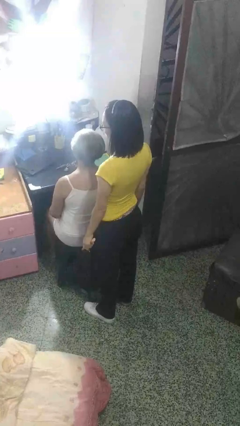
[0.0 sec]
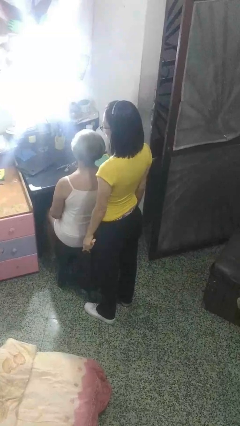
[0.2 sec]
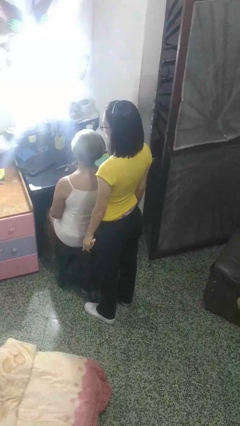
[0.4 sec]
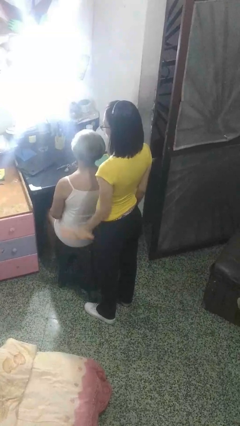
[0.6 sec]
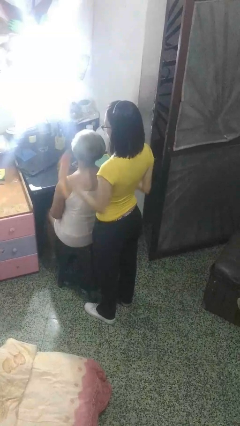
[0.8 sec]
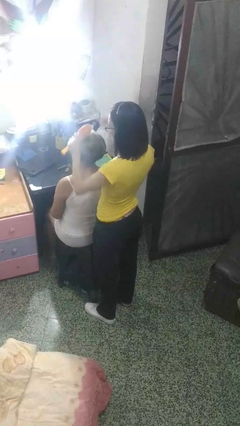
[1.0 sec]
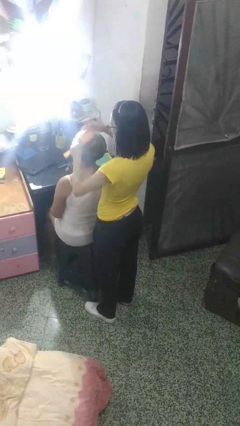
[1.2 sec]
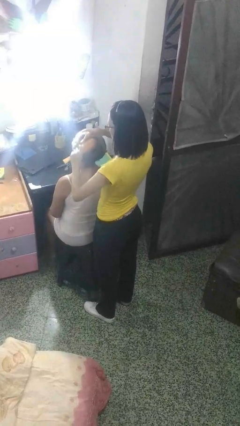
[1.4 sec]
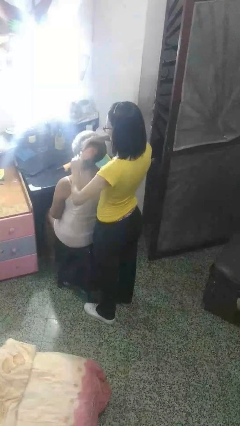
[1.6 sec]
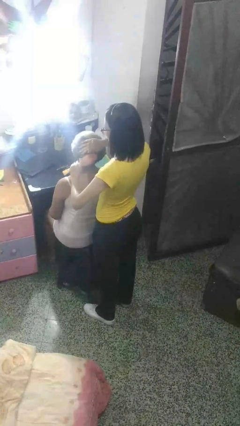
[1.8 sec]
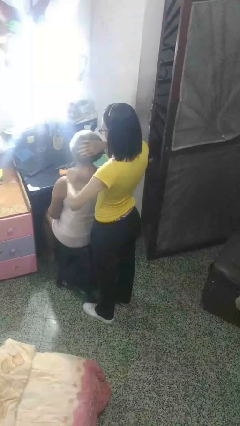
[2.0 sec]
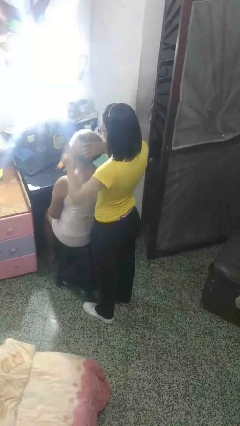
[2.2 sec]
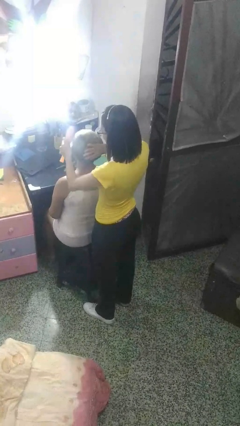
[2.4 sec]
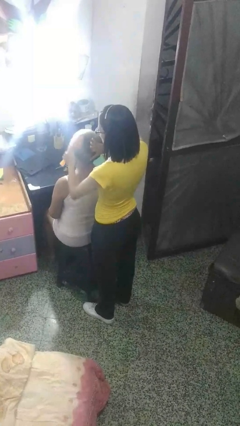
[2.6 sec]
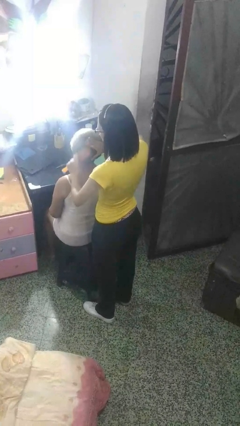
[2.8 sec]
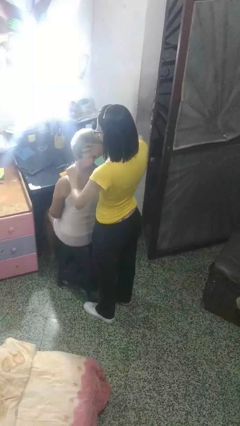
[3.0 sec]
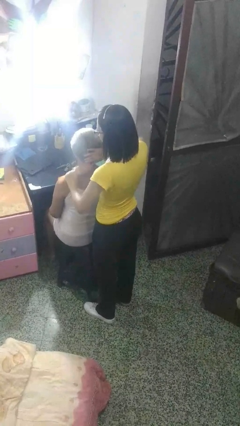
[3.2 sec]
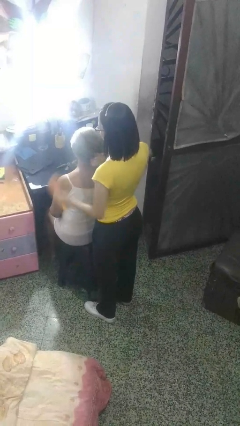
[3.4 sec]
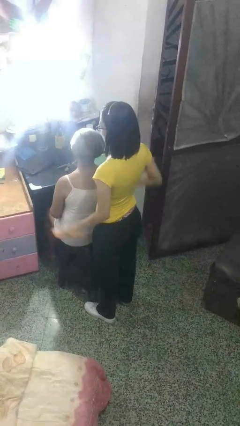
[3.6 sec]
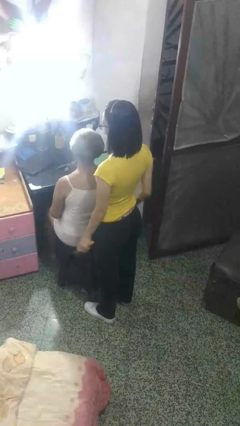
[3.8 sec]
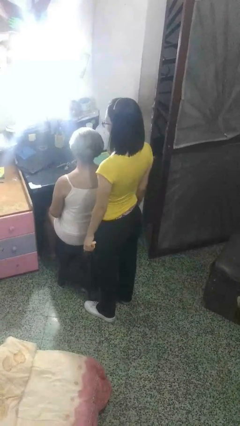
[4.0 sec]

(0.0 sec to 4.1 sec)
person brushes hair of person

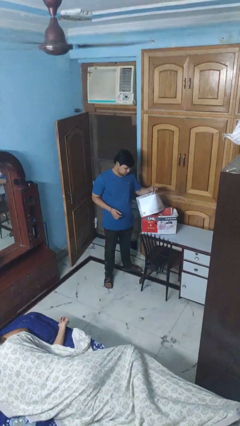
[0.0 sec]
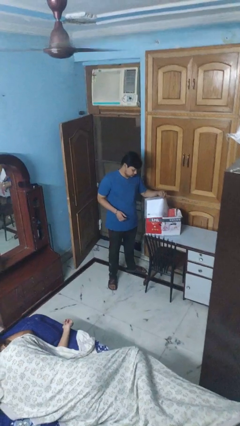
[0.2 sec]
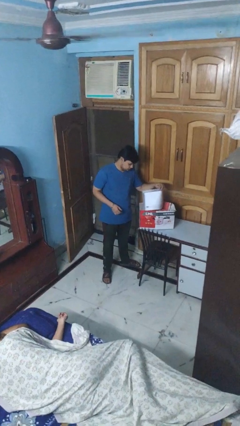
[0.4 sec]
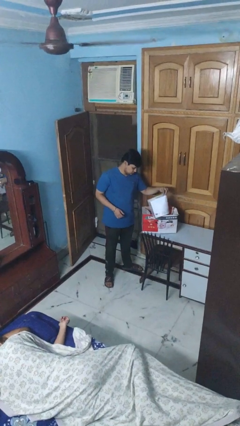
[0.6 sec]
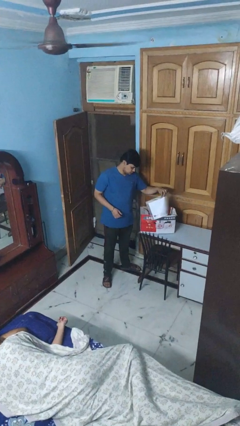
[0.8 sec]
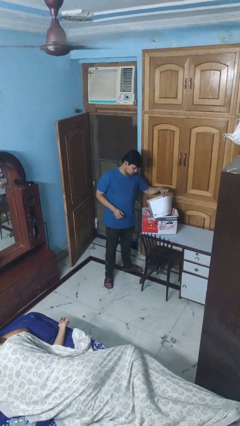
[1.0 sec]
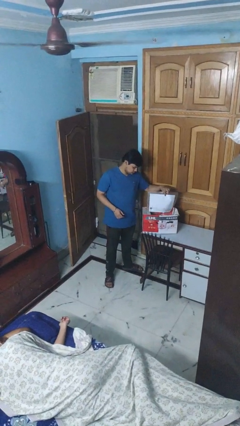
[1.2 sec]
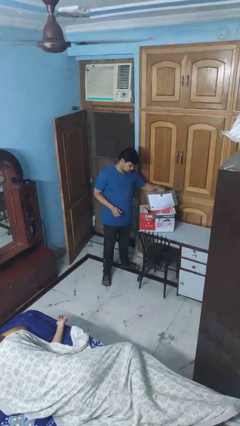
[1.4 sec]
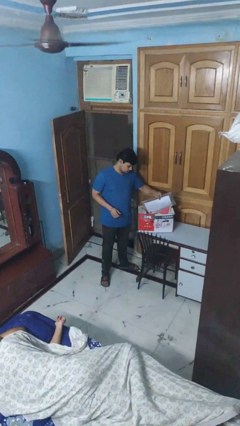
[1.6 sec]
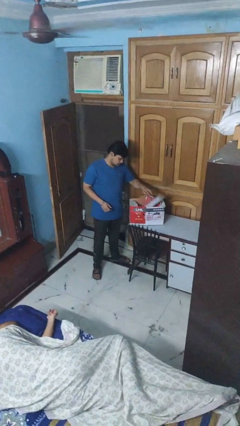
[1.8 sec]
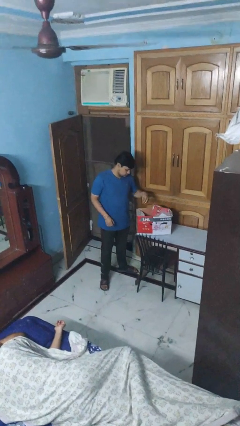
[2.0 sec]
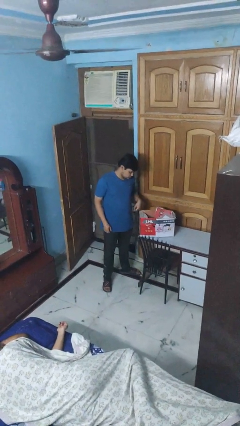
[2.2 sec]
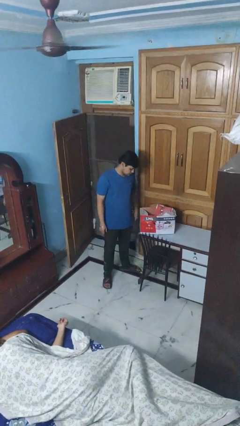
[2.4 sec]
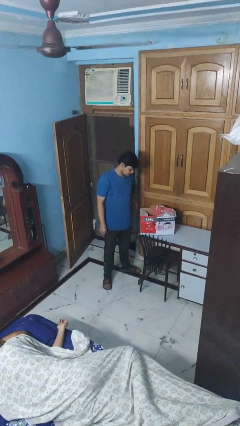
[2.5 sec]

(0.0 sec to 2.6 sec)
person puts object into box

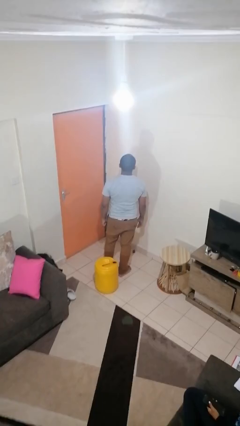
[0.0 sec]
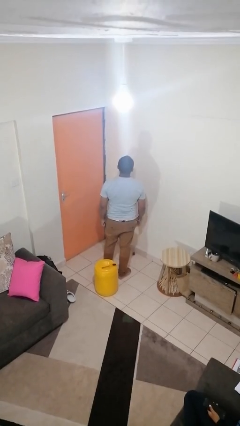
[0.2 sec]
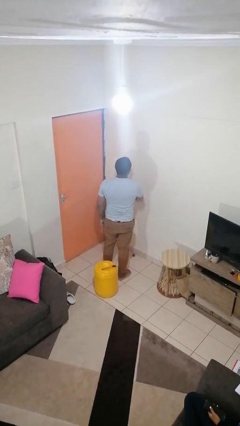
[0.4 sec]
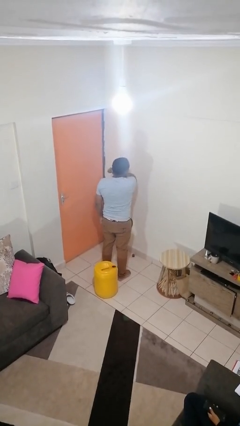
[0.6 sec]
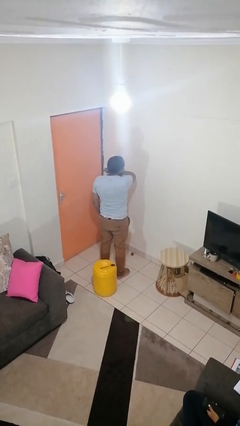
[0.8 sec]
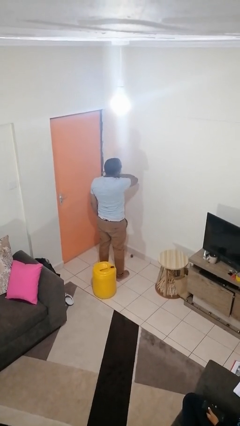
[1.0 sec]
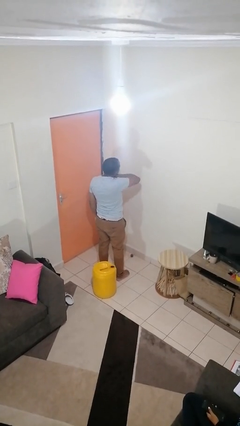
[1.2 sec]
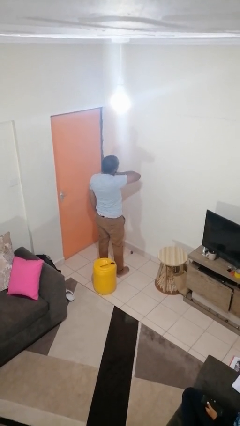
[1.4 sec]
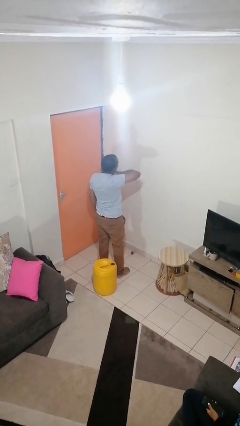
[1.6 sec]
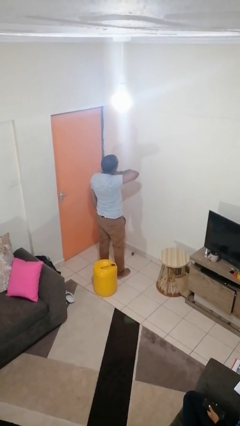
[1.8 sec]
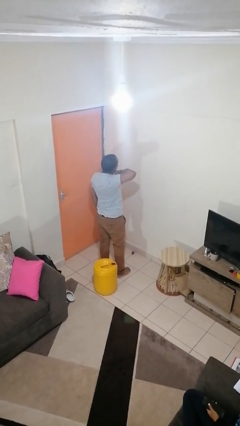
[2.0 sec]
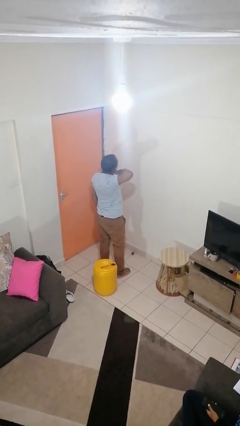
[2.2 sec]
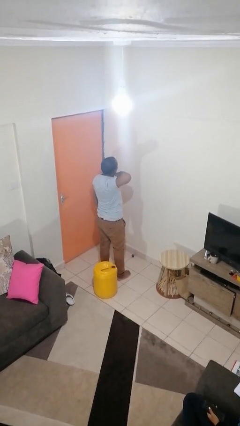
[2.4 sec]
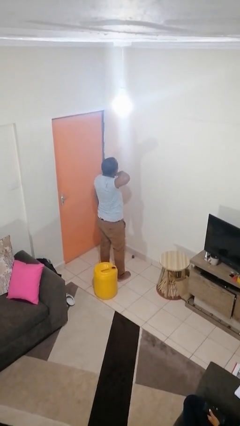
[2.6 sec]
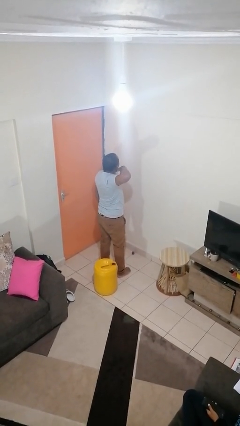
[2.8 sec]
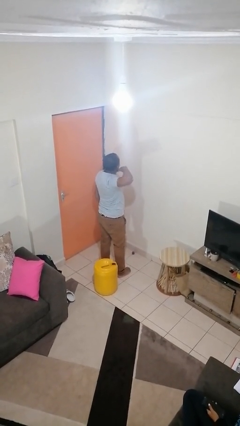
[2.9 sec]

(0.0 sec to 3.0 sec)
person gestures cut

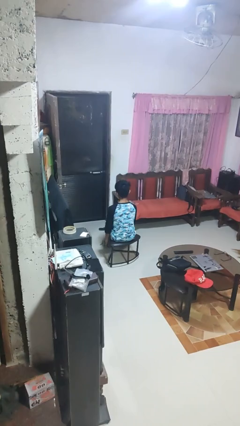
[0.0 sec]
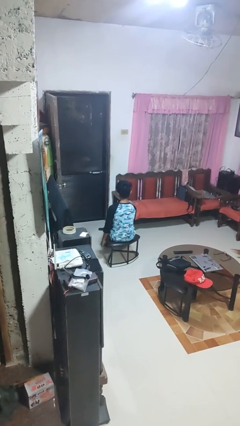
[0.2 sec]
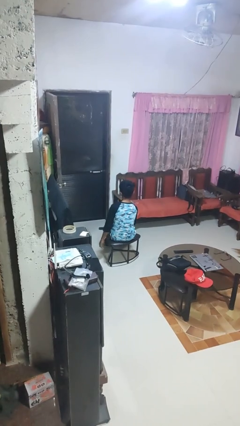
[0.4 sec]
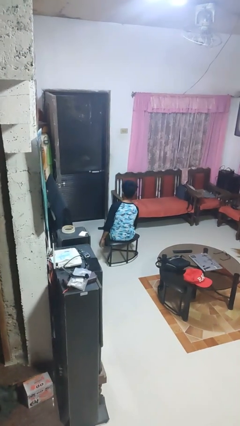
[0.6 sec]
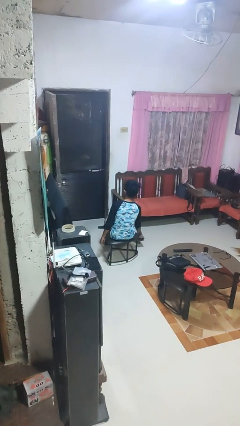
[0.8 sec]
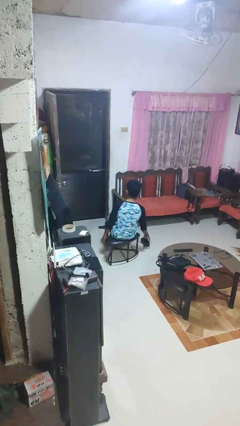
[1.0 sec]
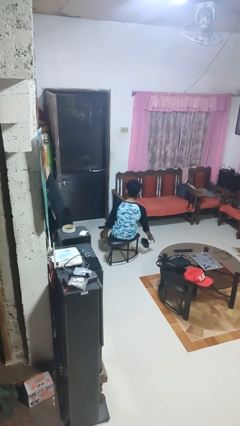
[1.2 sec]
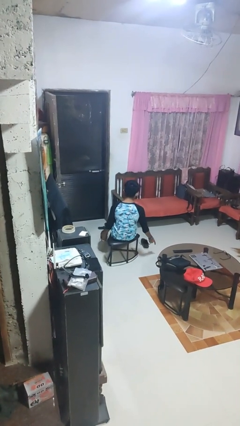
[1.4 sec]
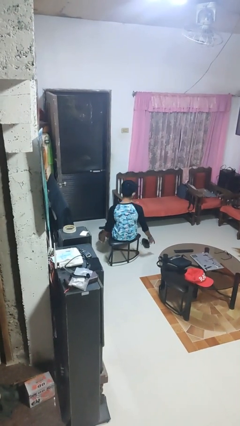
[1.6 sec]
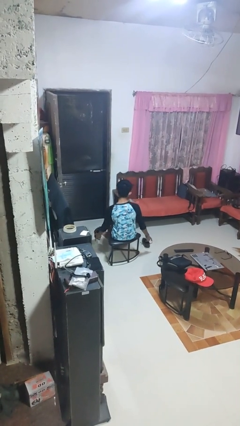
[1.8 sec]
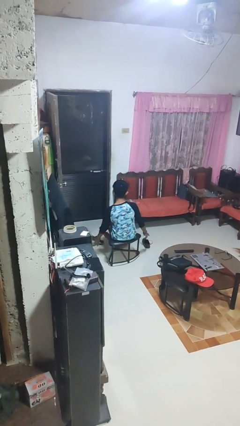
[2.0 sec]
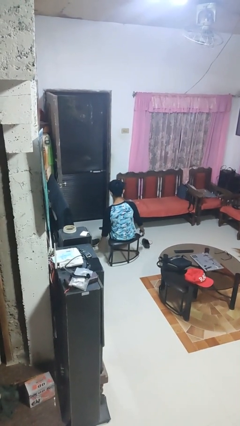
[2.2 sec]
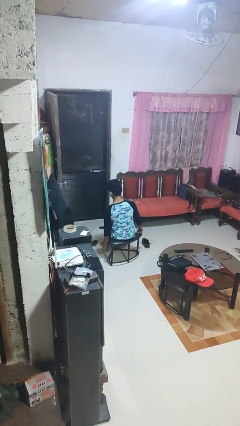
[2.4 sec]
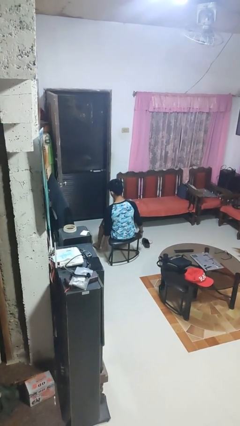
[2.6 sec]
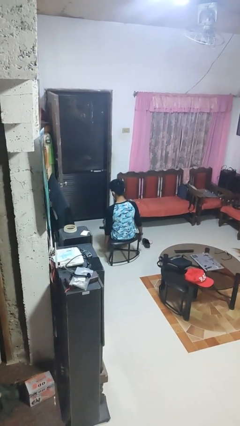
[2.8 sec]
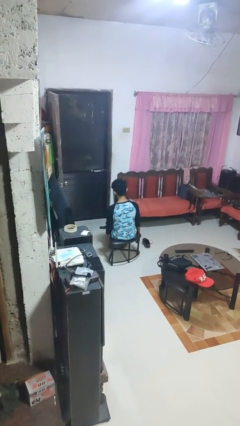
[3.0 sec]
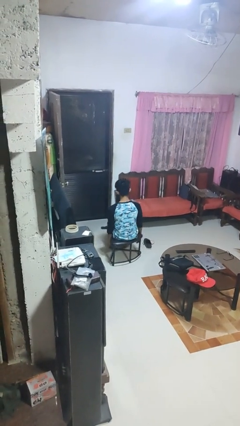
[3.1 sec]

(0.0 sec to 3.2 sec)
person takes off shoes

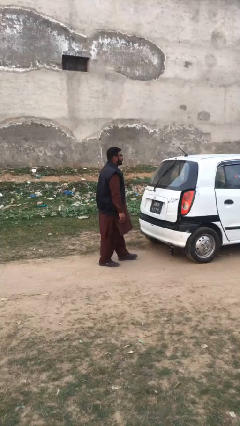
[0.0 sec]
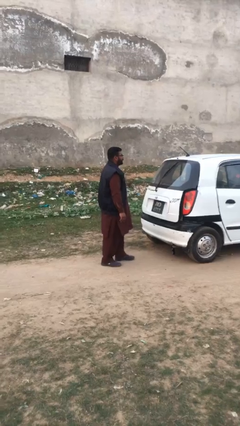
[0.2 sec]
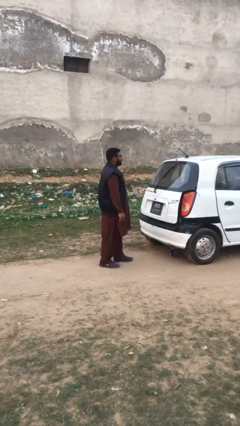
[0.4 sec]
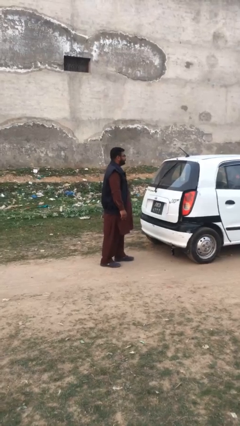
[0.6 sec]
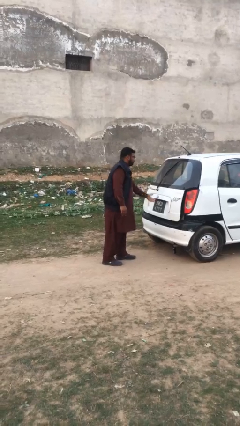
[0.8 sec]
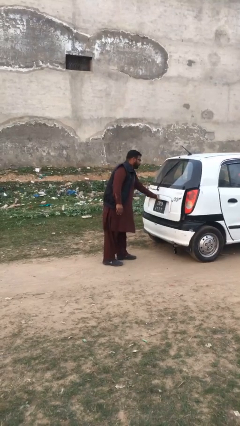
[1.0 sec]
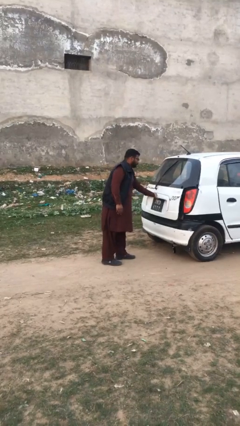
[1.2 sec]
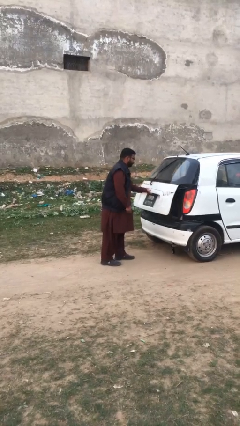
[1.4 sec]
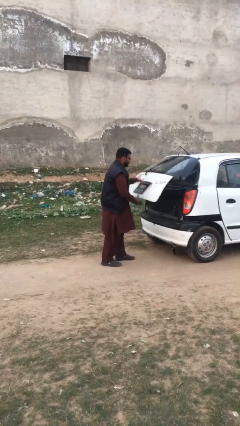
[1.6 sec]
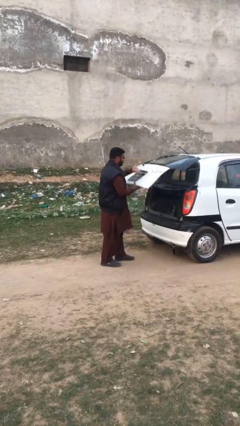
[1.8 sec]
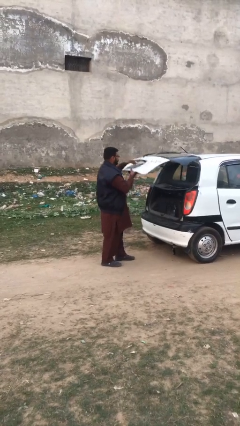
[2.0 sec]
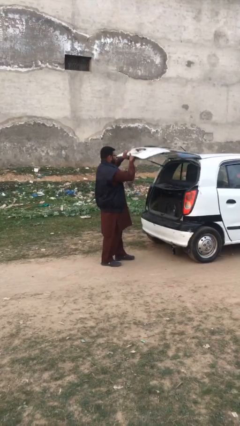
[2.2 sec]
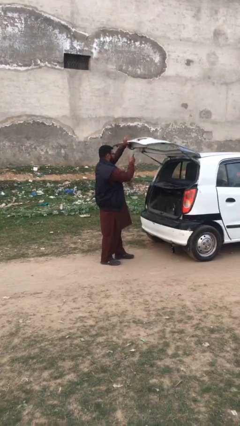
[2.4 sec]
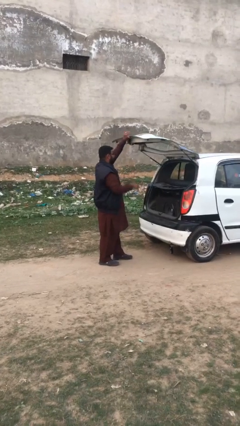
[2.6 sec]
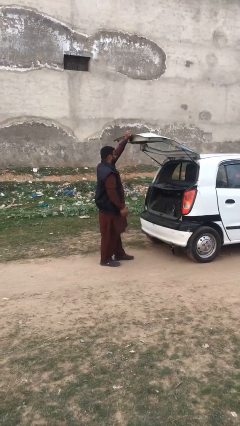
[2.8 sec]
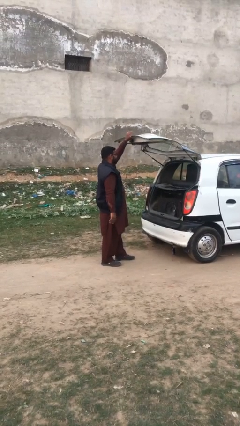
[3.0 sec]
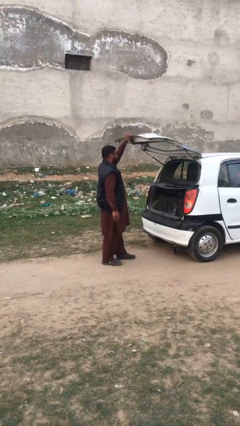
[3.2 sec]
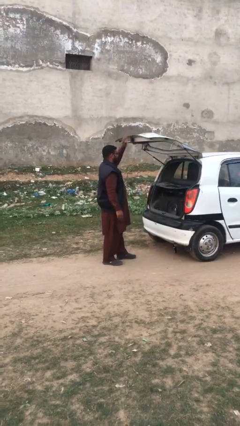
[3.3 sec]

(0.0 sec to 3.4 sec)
person opens car trunk

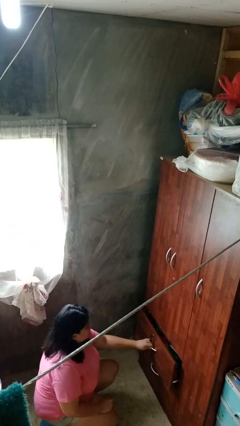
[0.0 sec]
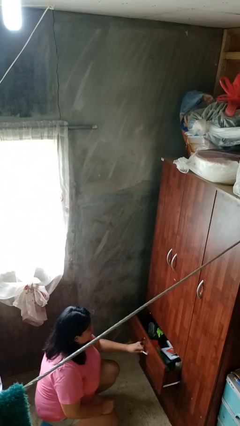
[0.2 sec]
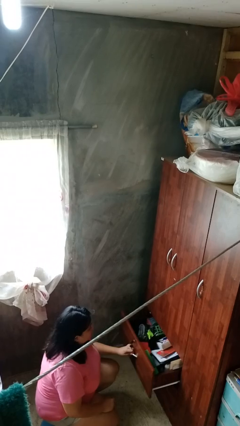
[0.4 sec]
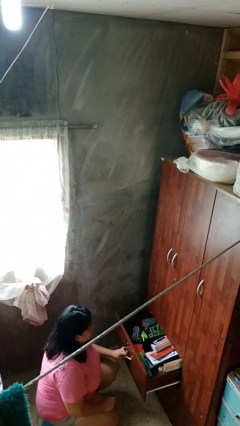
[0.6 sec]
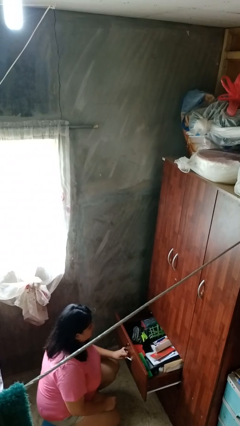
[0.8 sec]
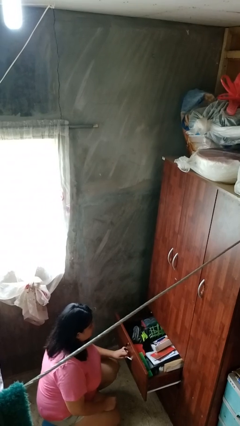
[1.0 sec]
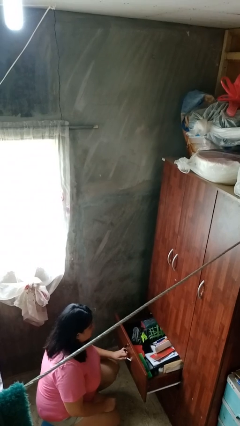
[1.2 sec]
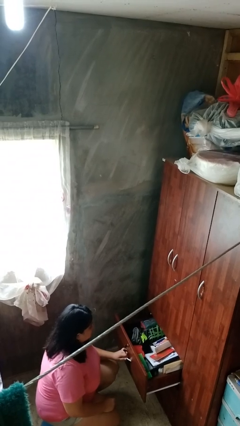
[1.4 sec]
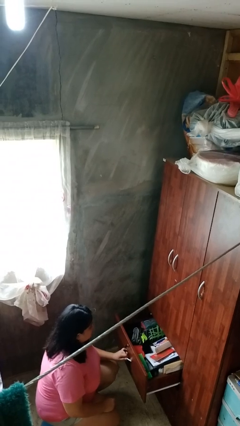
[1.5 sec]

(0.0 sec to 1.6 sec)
person opens dresser drawer
